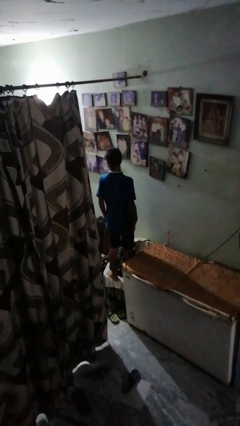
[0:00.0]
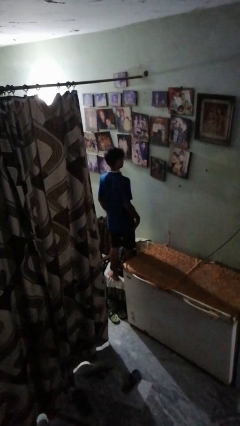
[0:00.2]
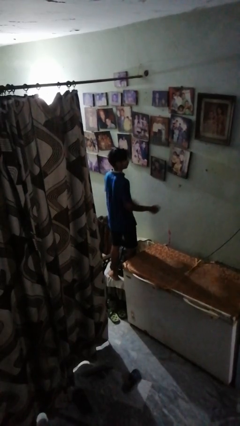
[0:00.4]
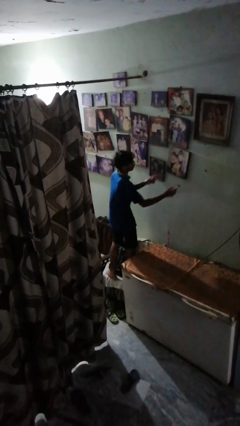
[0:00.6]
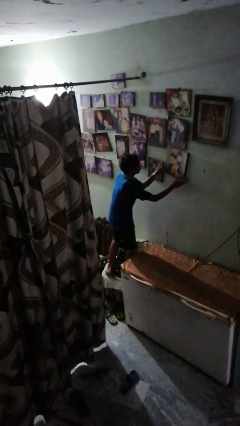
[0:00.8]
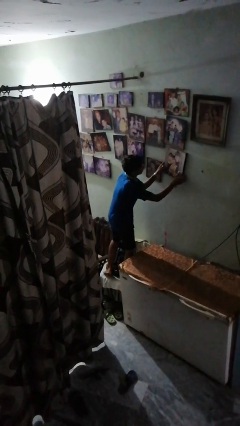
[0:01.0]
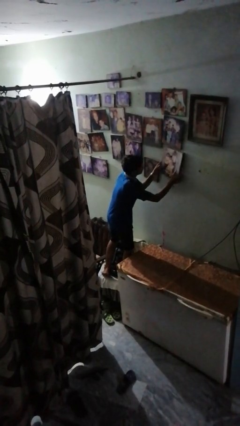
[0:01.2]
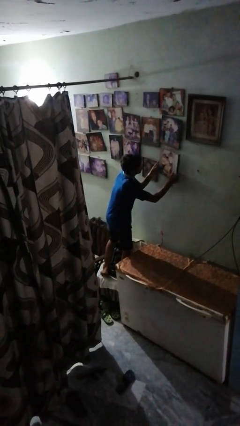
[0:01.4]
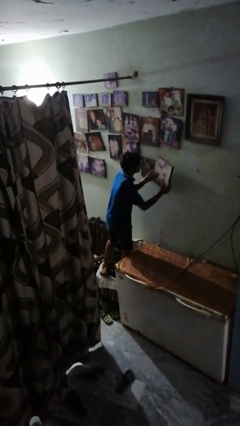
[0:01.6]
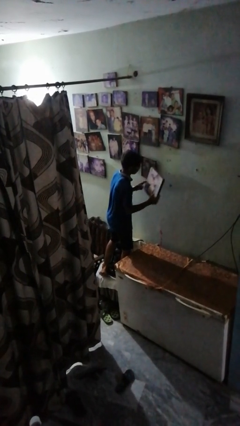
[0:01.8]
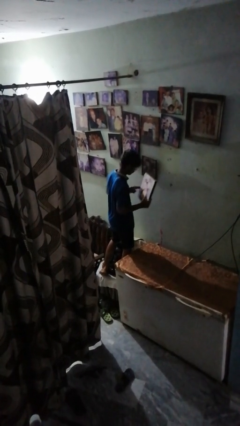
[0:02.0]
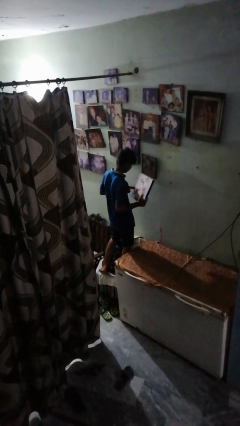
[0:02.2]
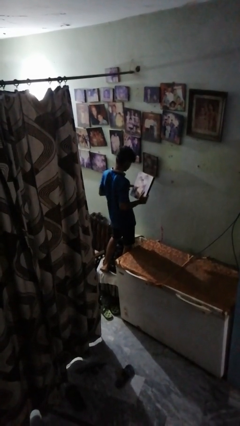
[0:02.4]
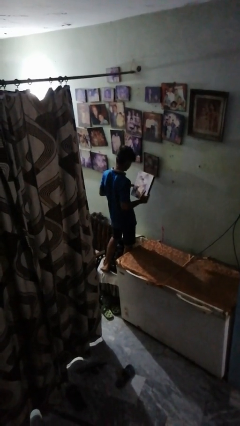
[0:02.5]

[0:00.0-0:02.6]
person takes down picture frame

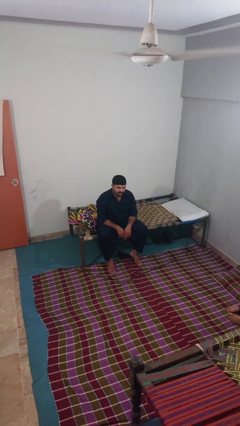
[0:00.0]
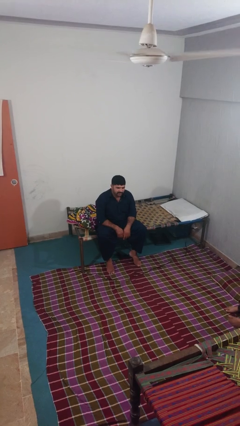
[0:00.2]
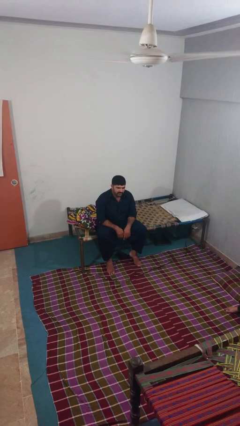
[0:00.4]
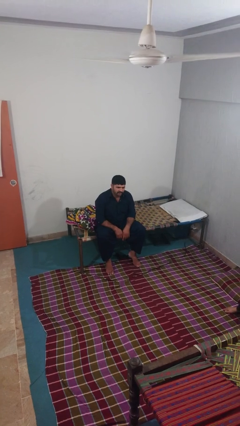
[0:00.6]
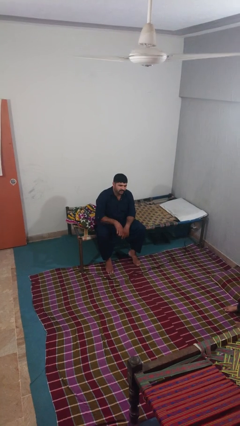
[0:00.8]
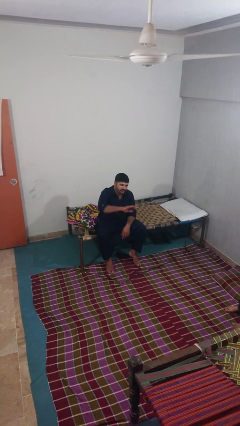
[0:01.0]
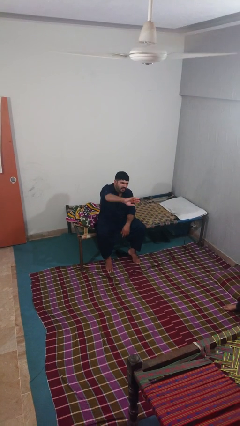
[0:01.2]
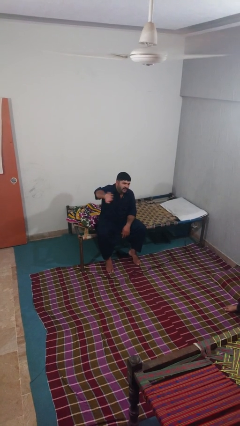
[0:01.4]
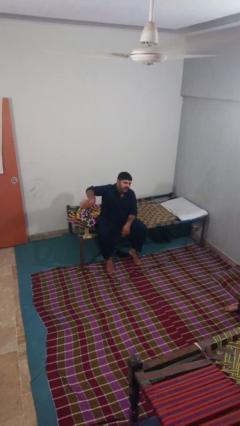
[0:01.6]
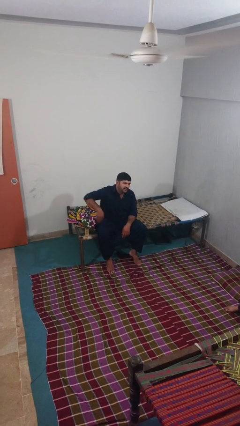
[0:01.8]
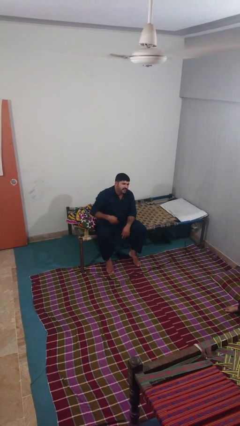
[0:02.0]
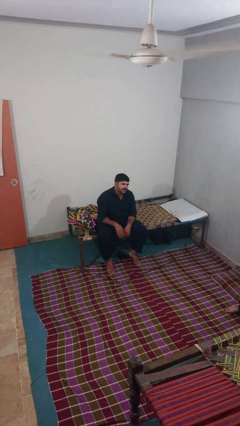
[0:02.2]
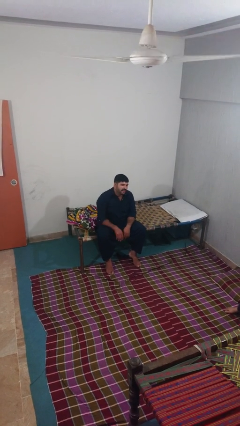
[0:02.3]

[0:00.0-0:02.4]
person gestures swipe right

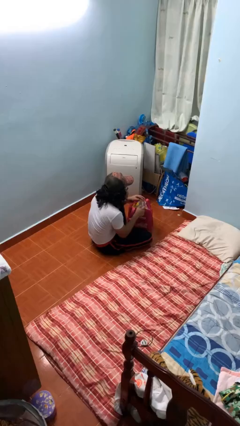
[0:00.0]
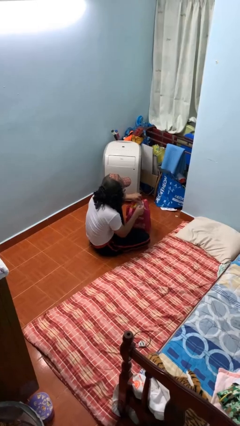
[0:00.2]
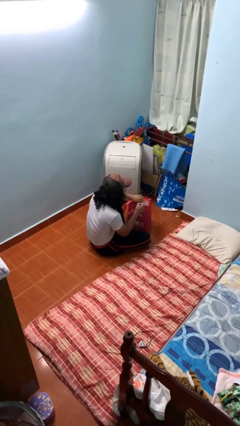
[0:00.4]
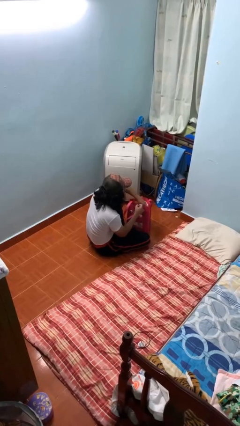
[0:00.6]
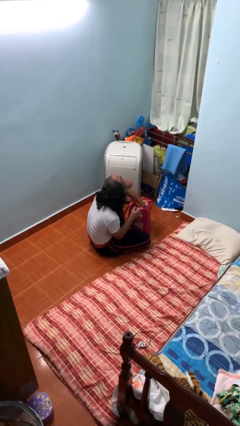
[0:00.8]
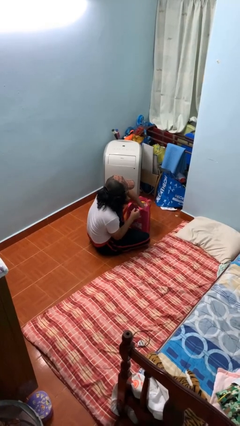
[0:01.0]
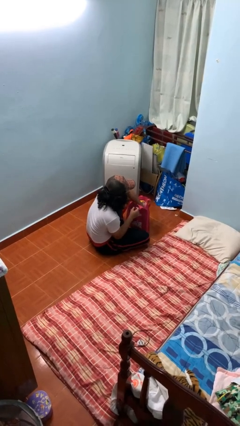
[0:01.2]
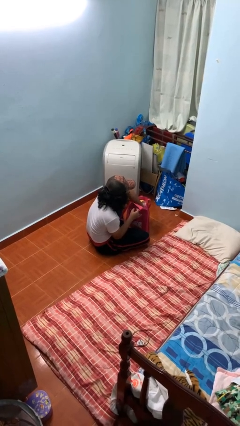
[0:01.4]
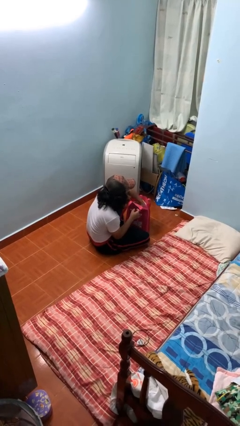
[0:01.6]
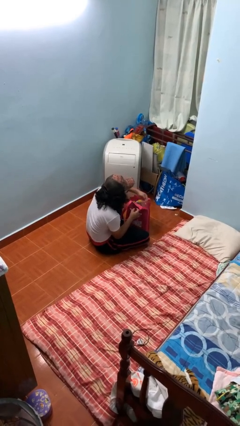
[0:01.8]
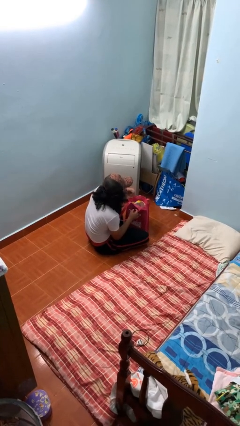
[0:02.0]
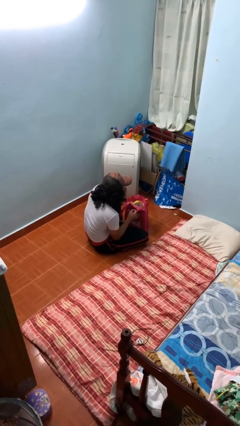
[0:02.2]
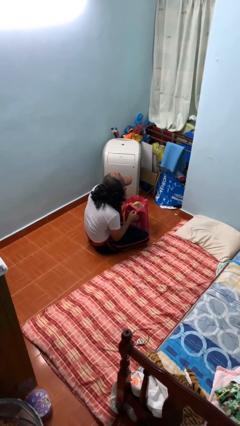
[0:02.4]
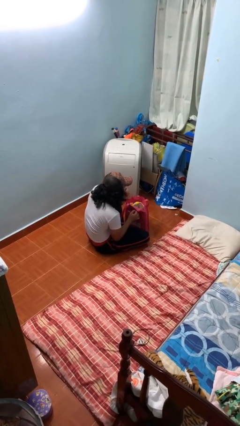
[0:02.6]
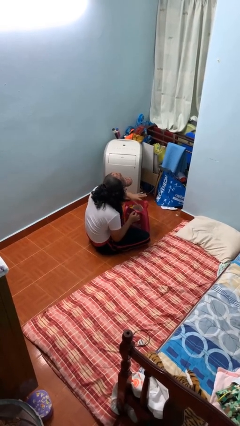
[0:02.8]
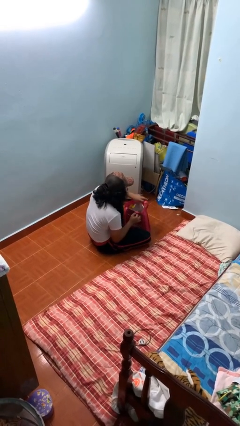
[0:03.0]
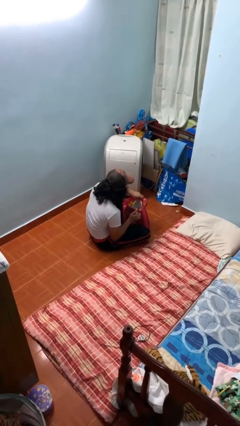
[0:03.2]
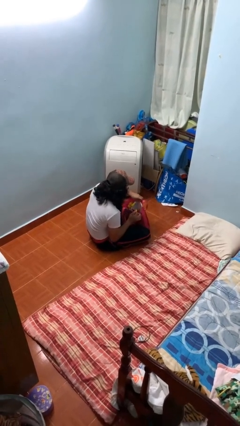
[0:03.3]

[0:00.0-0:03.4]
person eats snack from bag

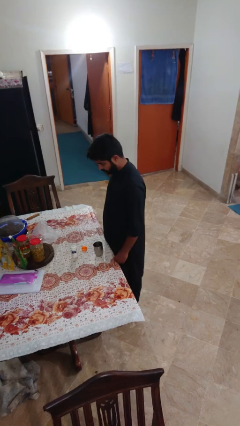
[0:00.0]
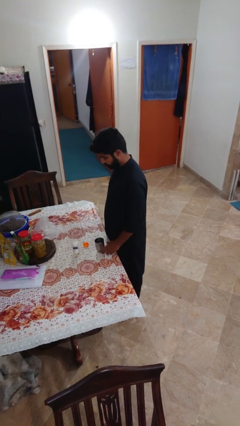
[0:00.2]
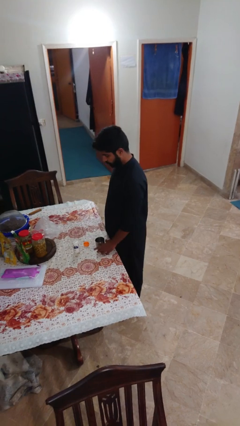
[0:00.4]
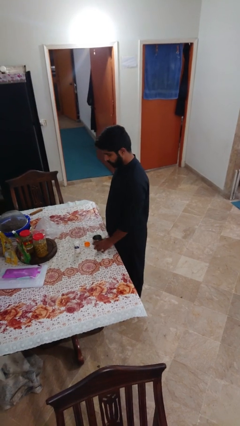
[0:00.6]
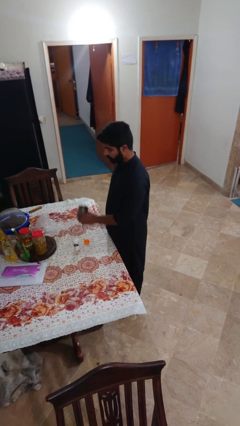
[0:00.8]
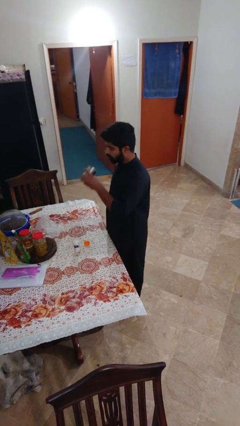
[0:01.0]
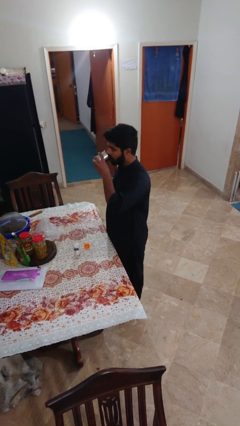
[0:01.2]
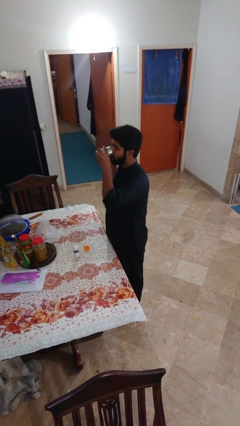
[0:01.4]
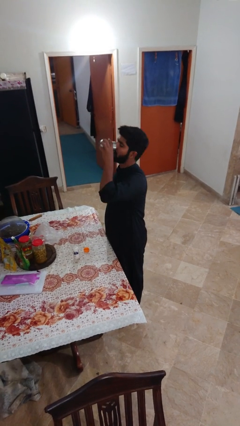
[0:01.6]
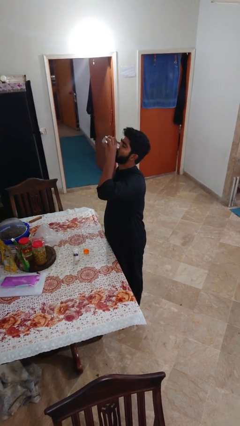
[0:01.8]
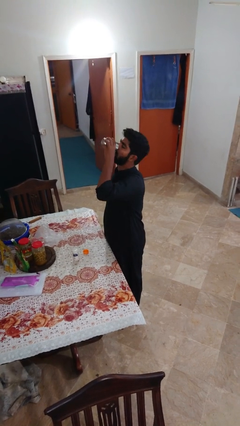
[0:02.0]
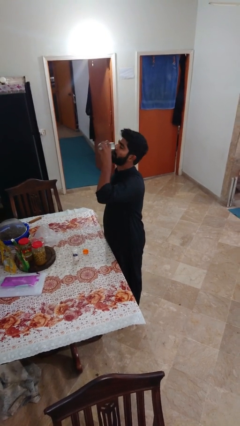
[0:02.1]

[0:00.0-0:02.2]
person drinks from cup

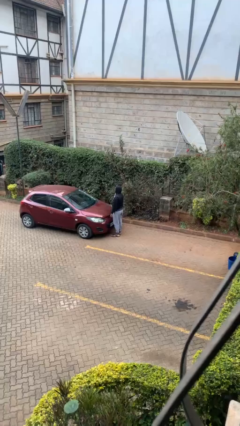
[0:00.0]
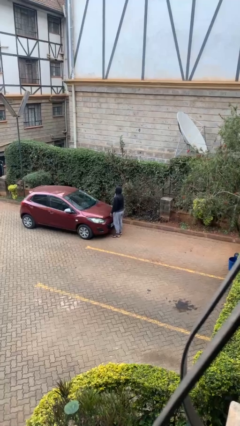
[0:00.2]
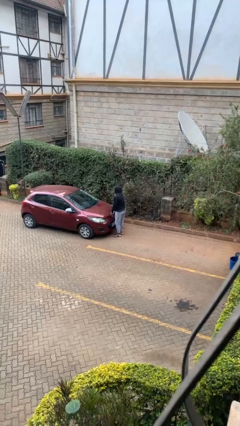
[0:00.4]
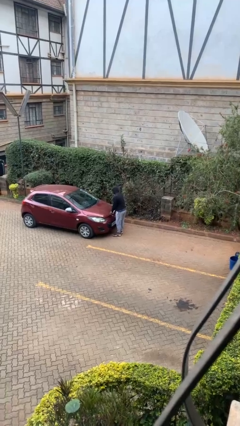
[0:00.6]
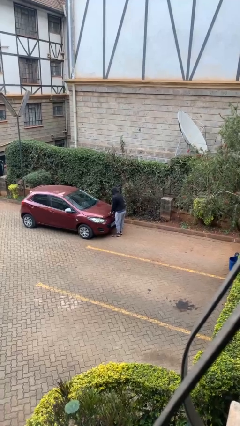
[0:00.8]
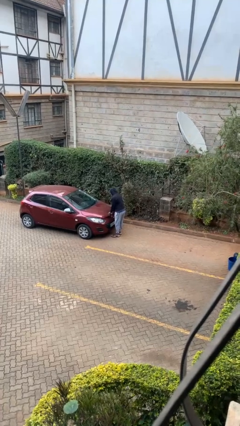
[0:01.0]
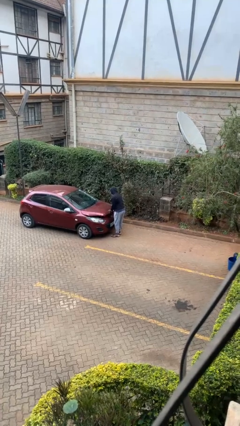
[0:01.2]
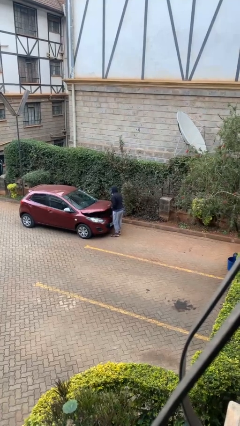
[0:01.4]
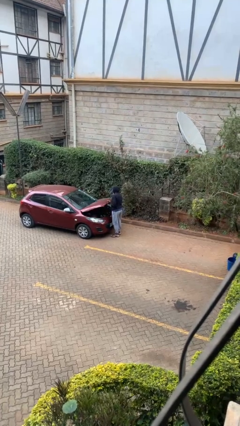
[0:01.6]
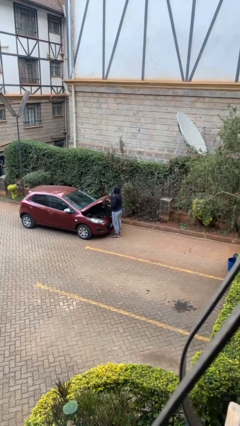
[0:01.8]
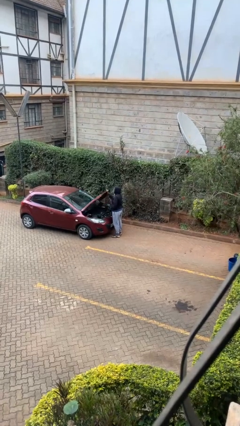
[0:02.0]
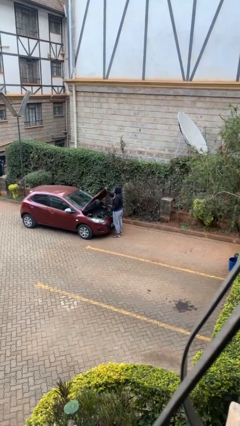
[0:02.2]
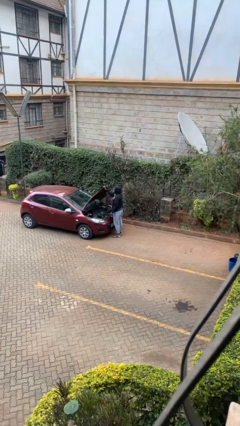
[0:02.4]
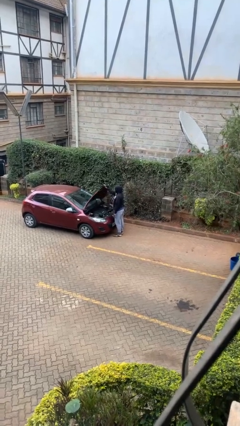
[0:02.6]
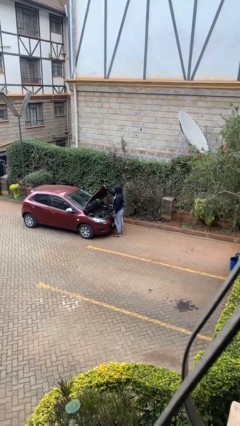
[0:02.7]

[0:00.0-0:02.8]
person opens car hood

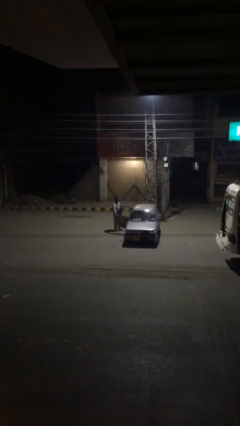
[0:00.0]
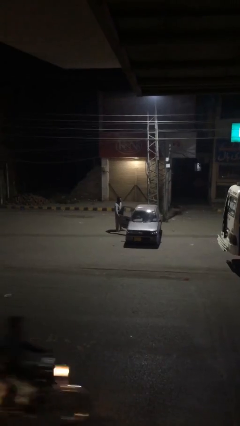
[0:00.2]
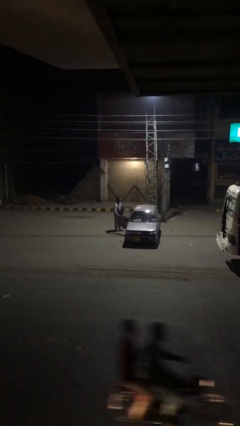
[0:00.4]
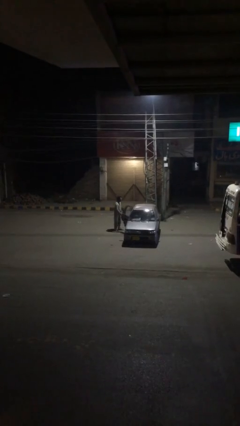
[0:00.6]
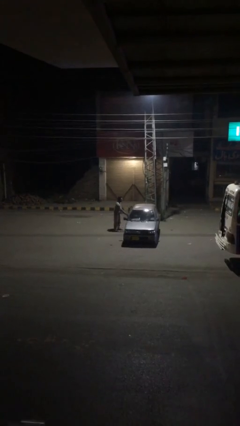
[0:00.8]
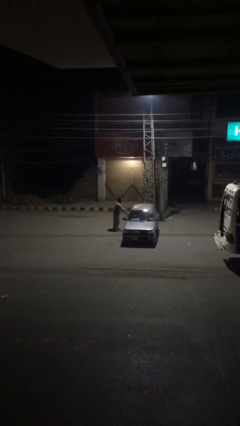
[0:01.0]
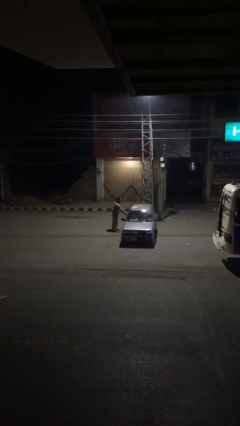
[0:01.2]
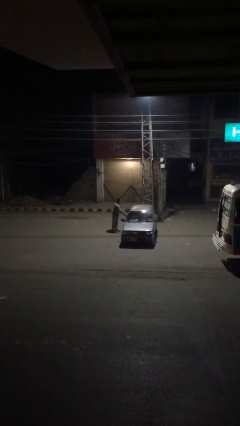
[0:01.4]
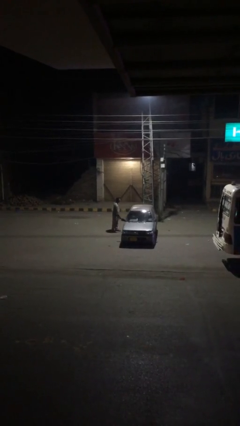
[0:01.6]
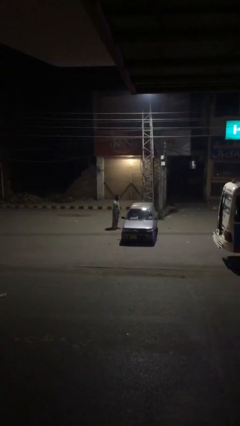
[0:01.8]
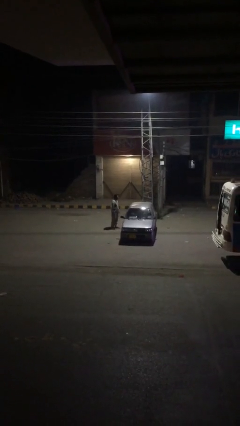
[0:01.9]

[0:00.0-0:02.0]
person closes car door

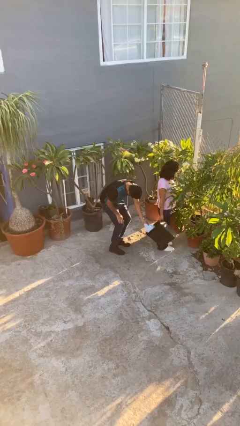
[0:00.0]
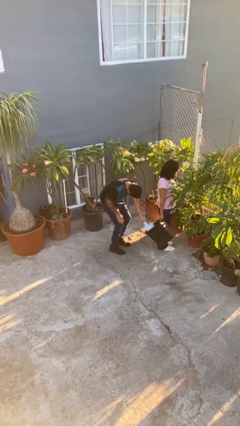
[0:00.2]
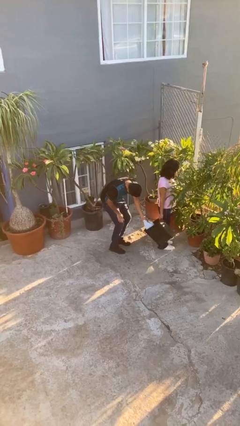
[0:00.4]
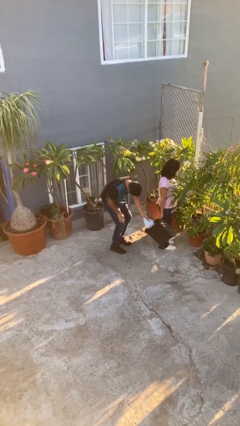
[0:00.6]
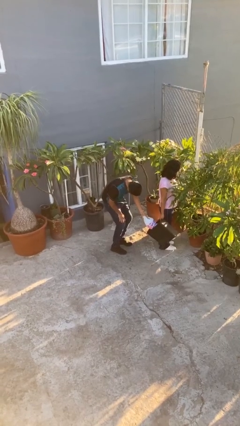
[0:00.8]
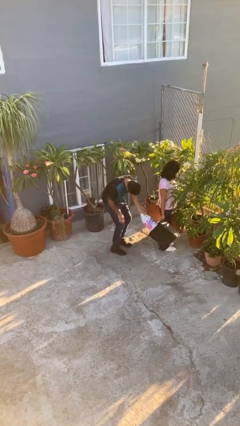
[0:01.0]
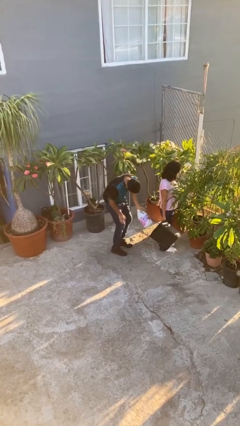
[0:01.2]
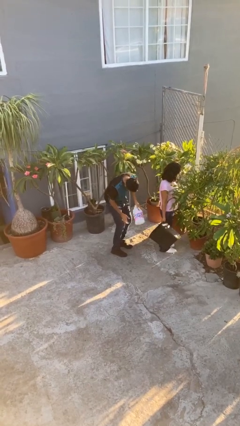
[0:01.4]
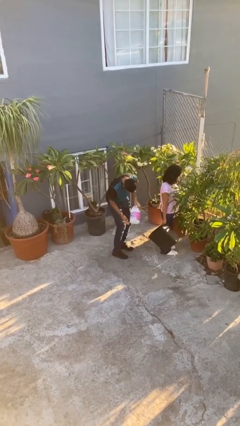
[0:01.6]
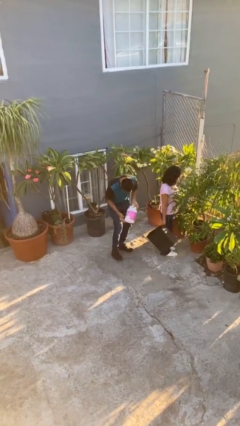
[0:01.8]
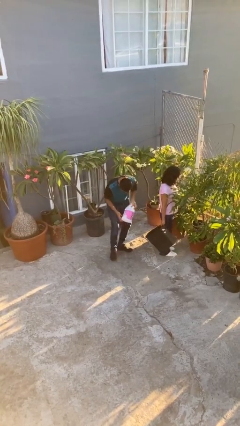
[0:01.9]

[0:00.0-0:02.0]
person steals object from person
